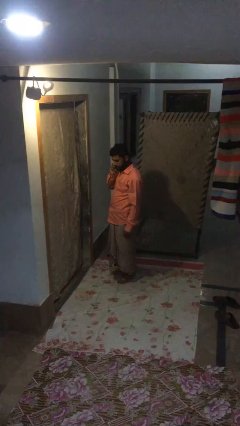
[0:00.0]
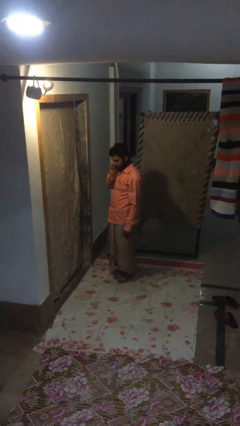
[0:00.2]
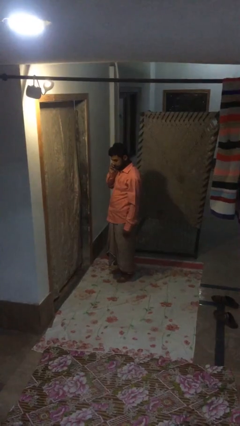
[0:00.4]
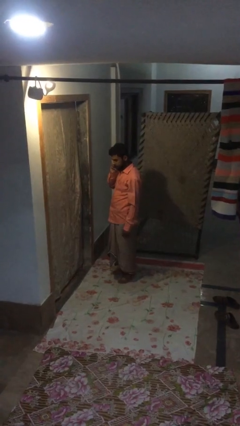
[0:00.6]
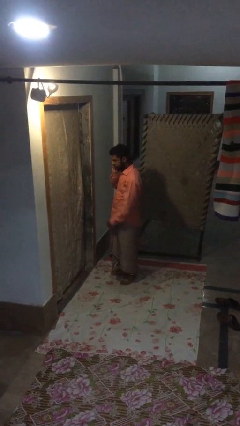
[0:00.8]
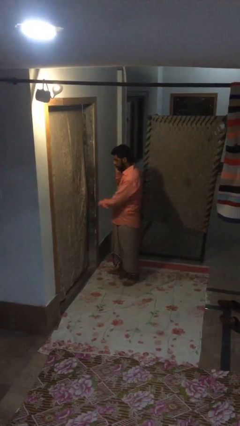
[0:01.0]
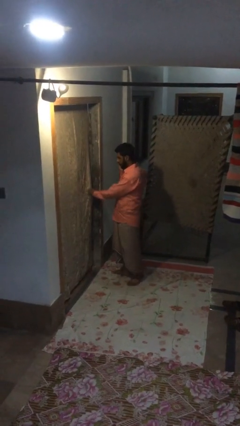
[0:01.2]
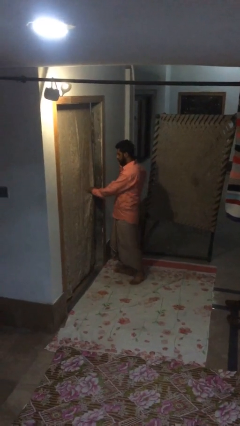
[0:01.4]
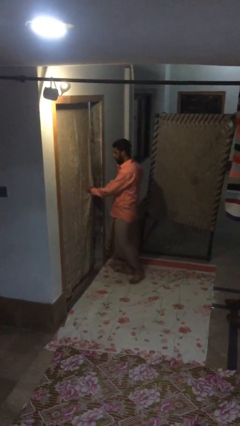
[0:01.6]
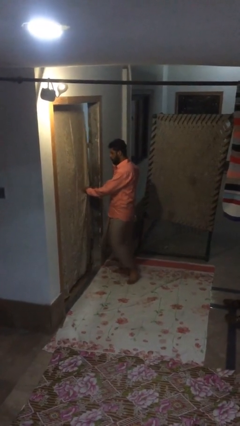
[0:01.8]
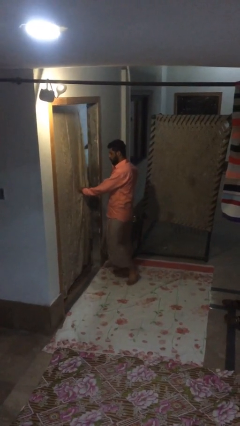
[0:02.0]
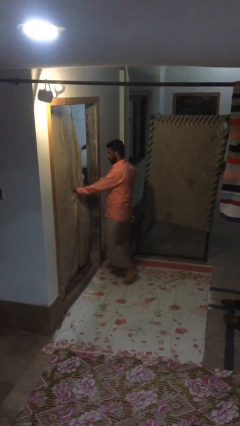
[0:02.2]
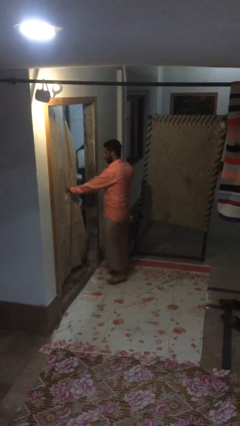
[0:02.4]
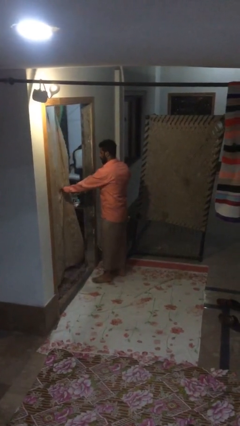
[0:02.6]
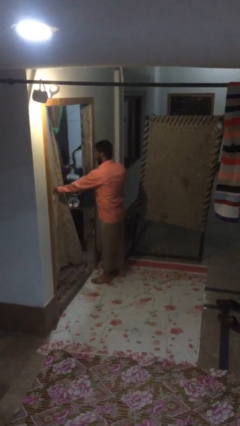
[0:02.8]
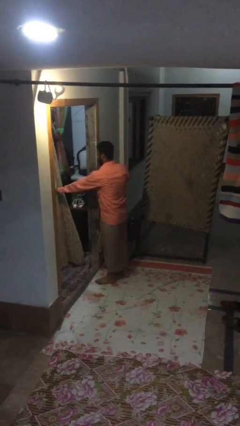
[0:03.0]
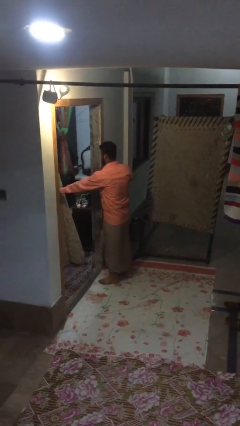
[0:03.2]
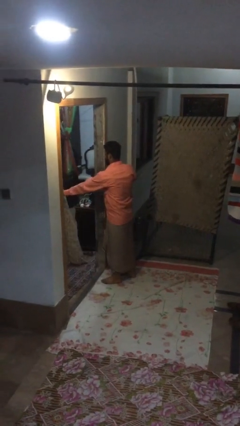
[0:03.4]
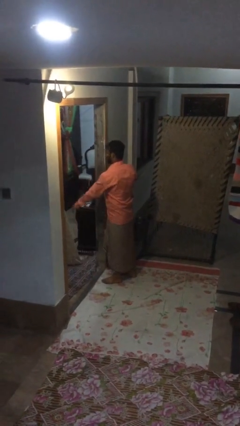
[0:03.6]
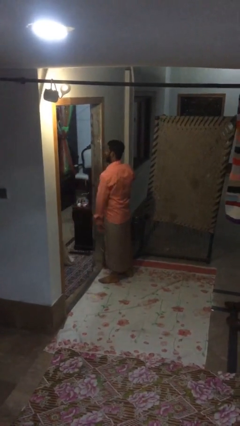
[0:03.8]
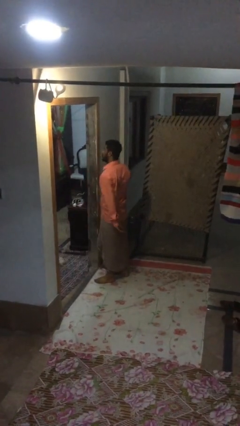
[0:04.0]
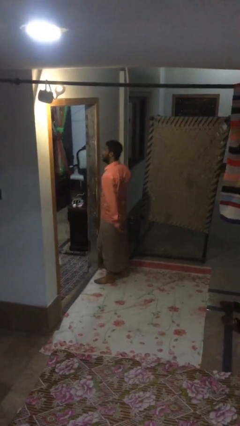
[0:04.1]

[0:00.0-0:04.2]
person opens facility door

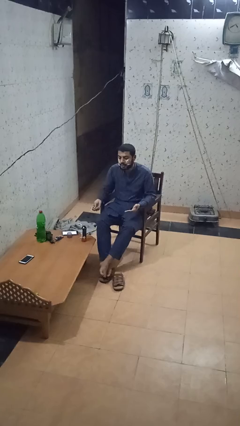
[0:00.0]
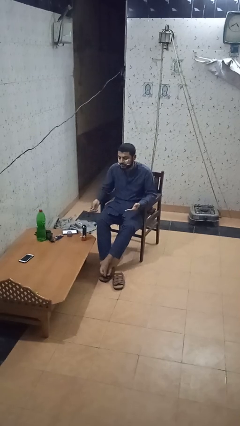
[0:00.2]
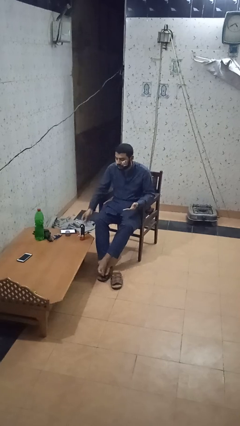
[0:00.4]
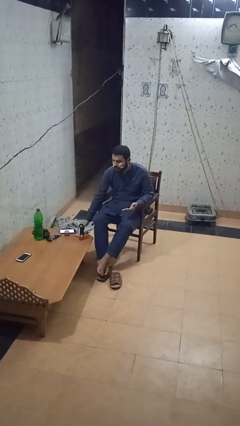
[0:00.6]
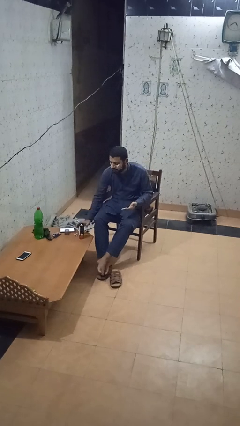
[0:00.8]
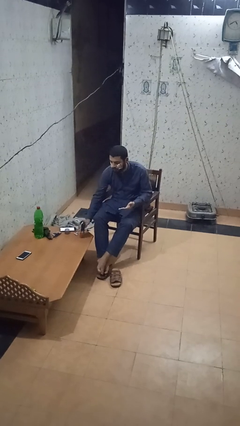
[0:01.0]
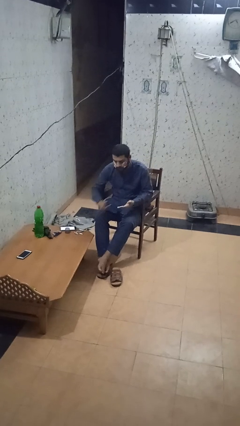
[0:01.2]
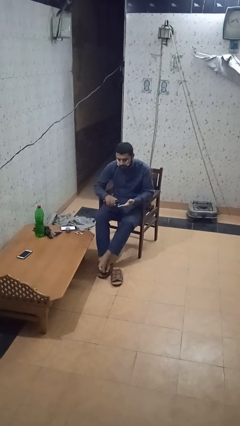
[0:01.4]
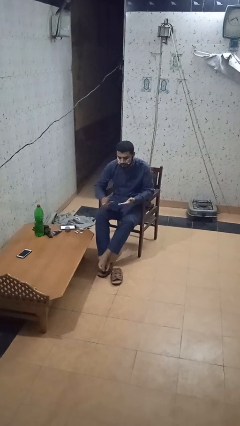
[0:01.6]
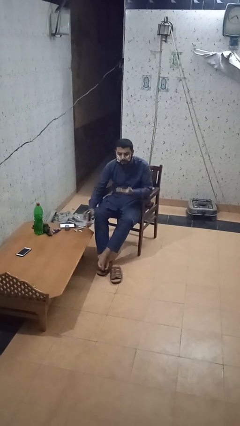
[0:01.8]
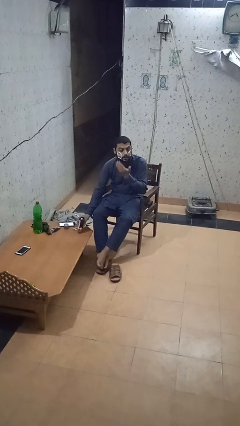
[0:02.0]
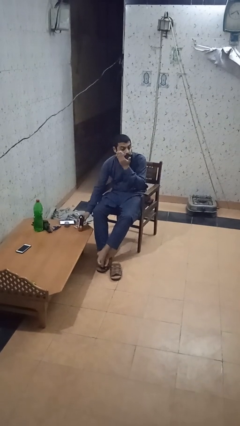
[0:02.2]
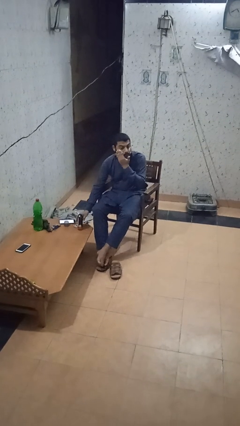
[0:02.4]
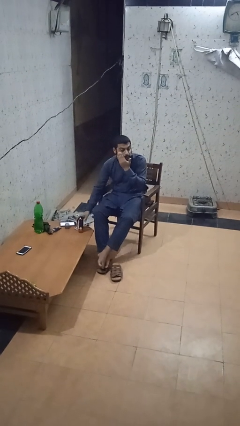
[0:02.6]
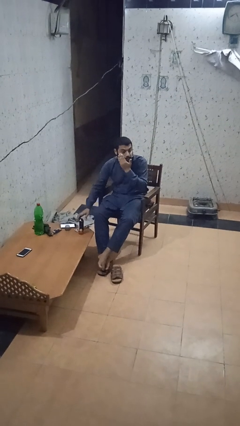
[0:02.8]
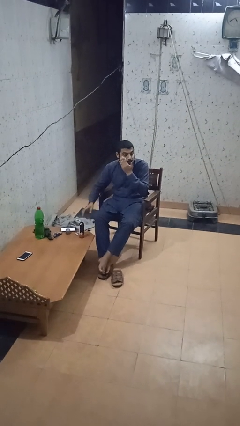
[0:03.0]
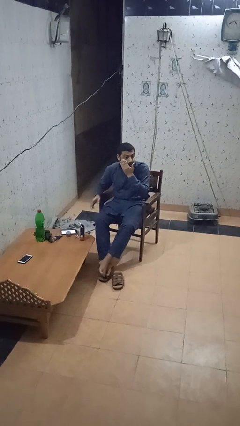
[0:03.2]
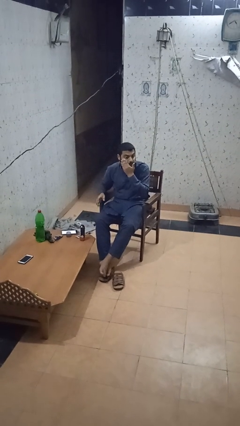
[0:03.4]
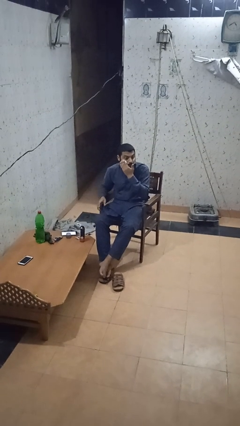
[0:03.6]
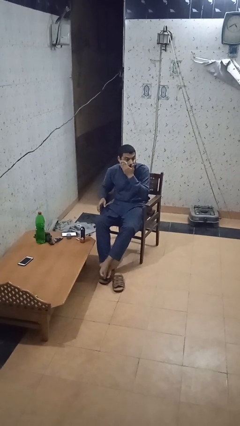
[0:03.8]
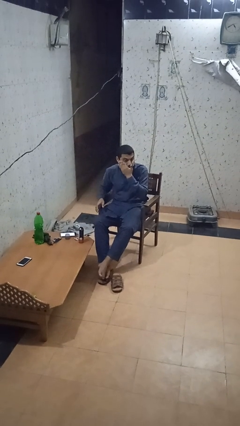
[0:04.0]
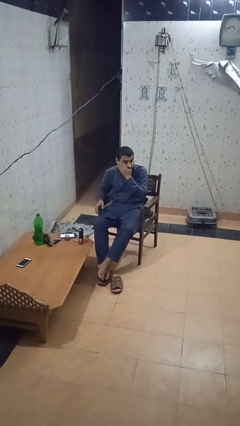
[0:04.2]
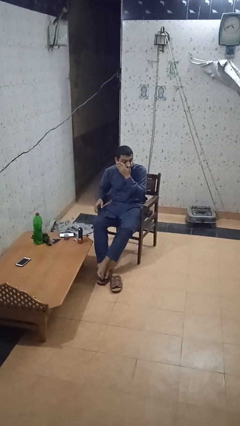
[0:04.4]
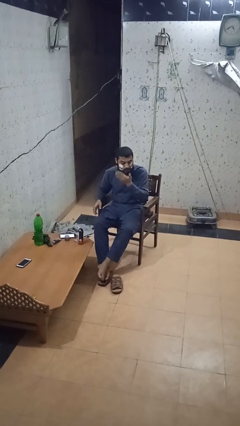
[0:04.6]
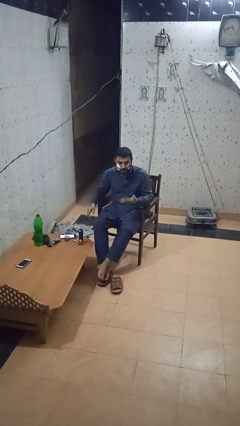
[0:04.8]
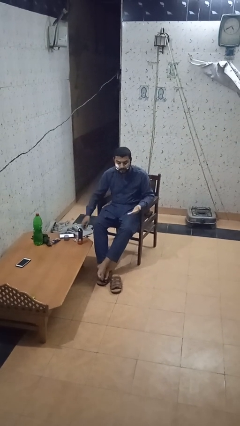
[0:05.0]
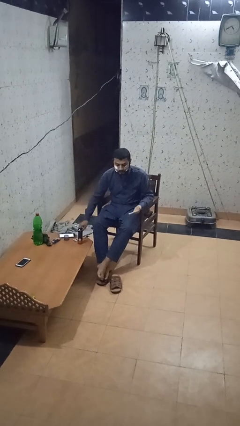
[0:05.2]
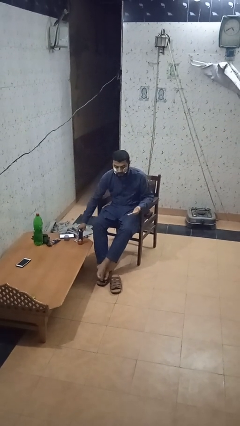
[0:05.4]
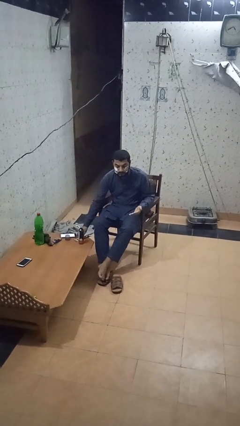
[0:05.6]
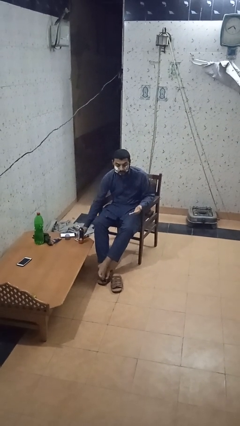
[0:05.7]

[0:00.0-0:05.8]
person applies shaving cream

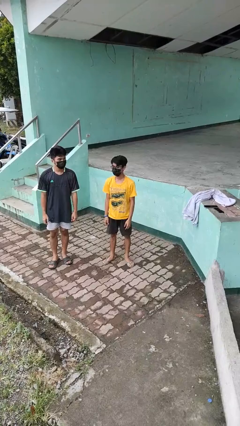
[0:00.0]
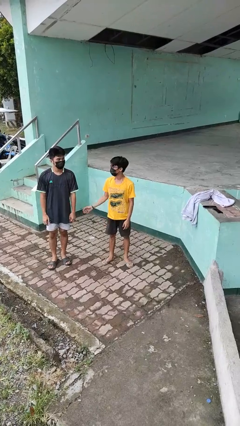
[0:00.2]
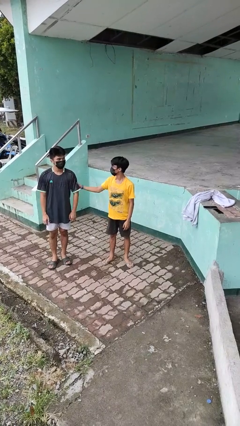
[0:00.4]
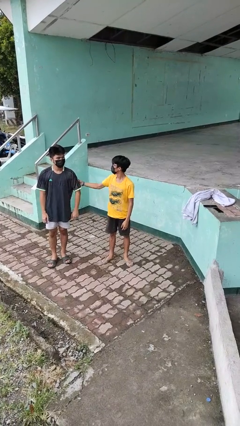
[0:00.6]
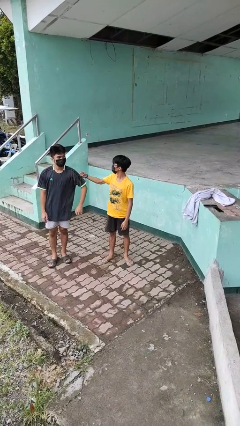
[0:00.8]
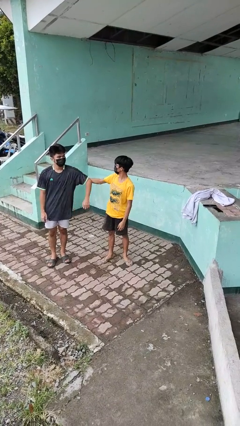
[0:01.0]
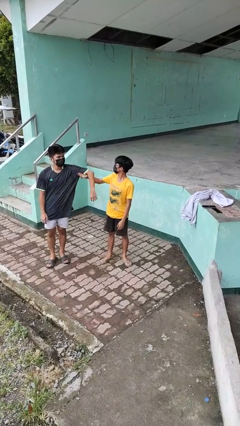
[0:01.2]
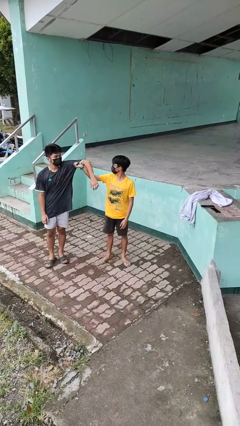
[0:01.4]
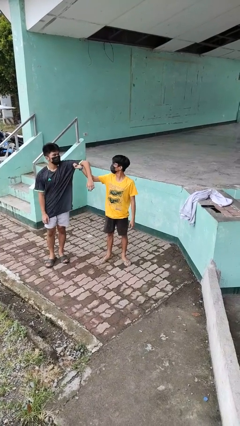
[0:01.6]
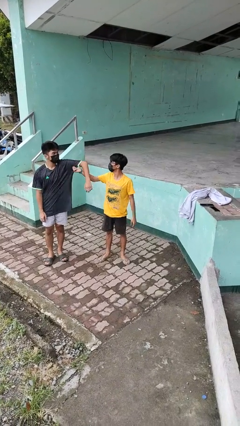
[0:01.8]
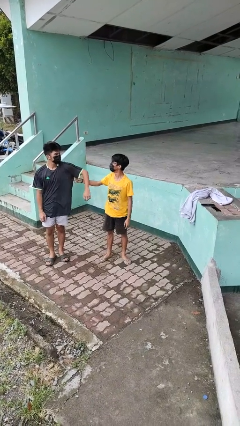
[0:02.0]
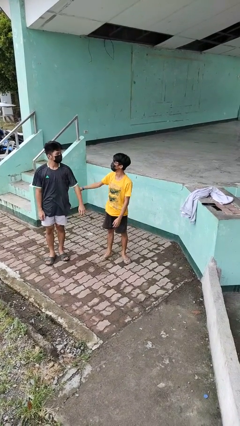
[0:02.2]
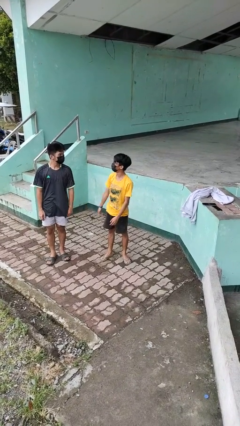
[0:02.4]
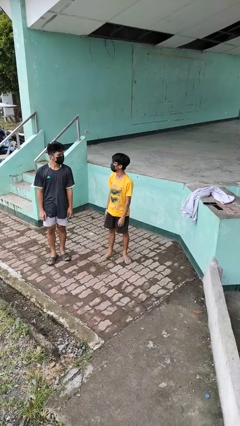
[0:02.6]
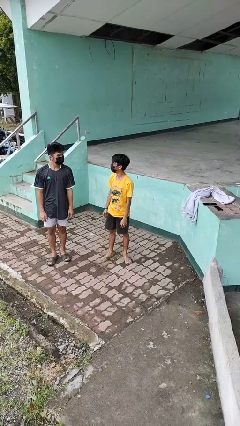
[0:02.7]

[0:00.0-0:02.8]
person grabs person by bicep

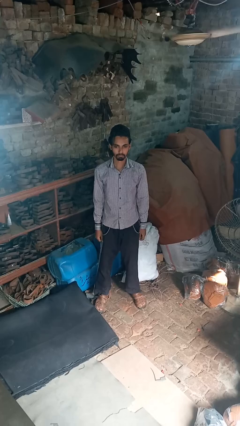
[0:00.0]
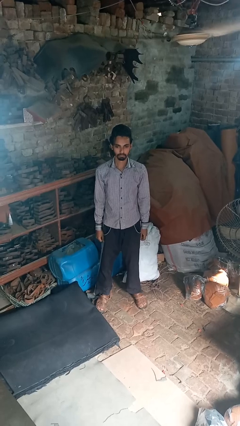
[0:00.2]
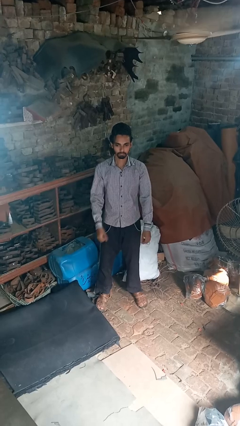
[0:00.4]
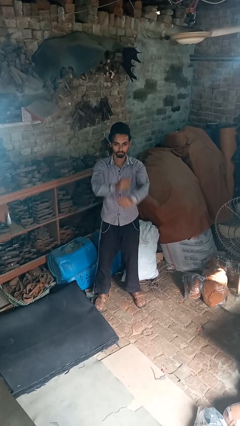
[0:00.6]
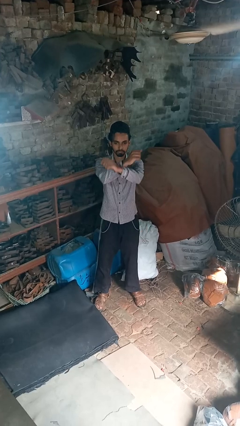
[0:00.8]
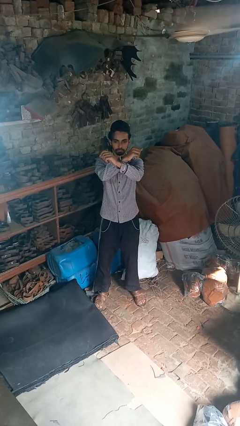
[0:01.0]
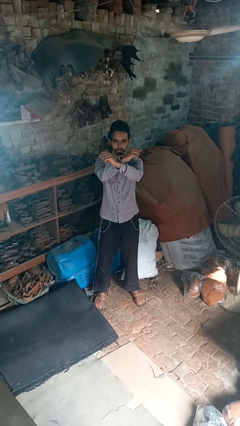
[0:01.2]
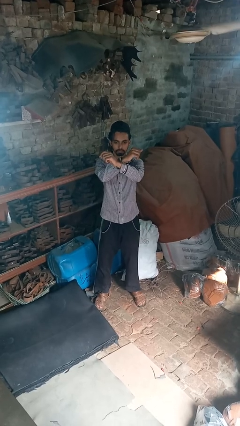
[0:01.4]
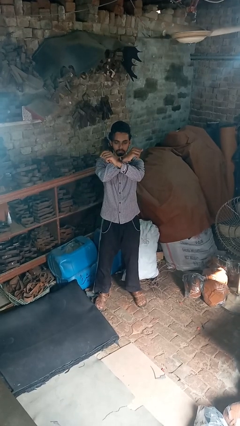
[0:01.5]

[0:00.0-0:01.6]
person crosses arms

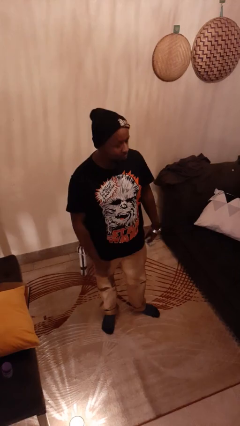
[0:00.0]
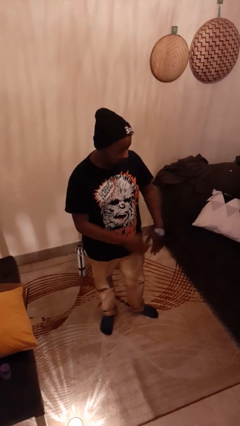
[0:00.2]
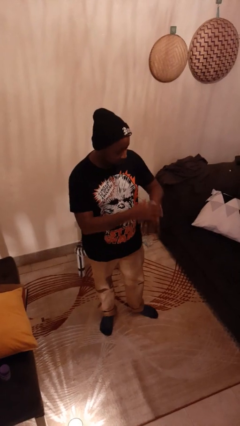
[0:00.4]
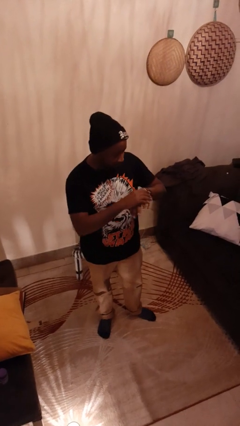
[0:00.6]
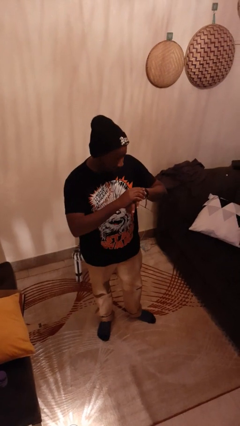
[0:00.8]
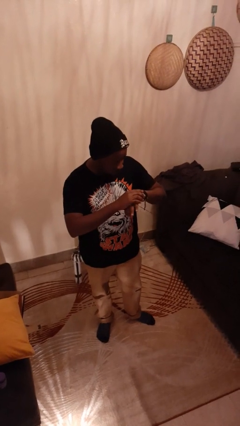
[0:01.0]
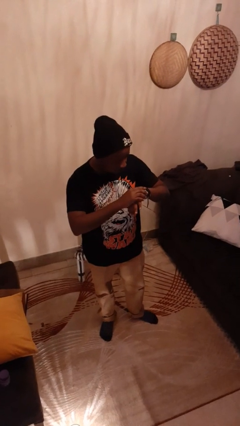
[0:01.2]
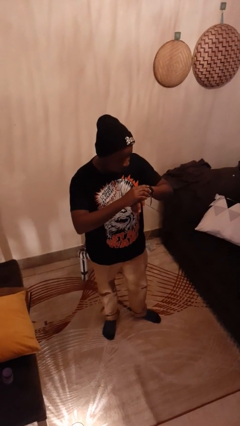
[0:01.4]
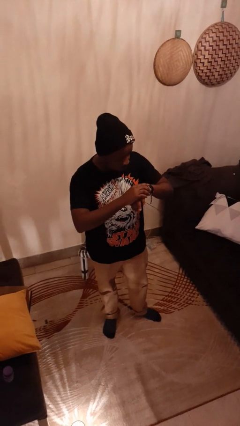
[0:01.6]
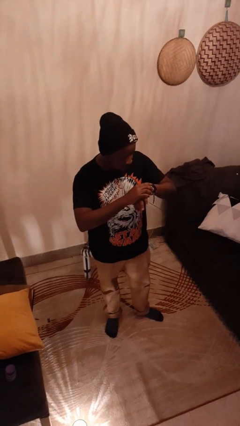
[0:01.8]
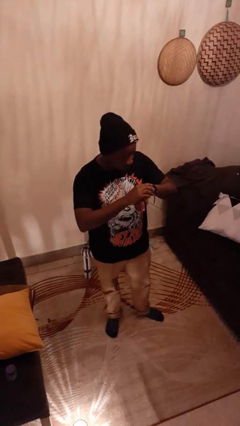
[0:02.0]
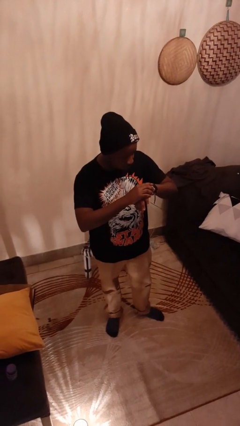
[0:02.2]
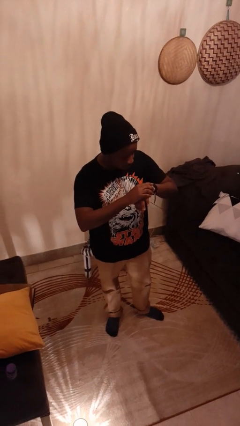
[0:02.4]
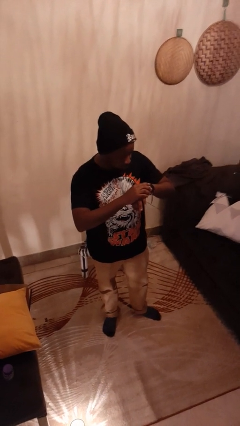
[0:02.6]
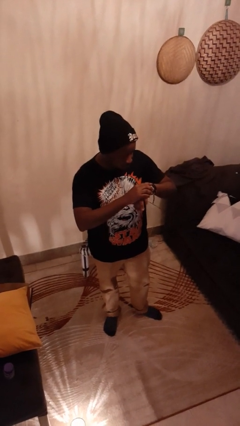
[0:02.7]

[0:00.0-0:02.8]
person looks at wristwatch

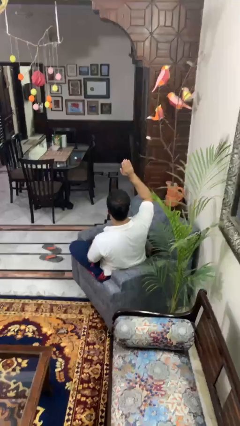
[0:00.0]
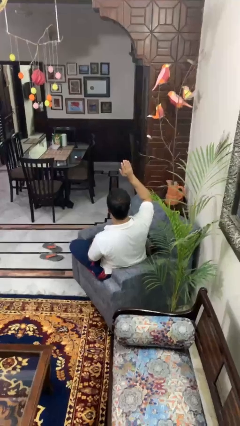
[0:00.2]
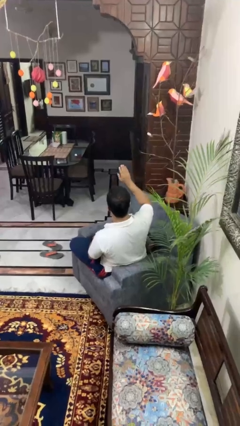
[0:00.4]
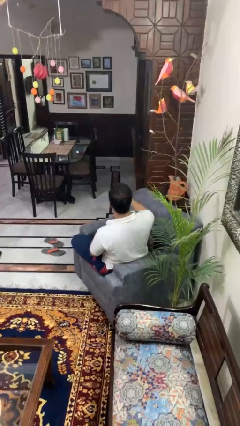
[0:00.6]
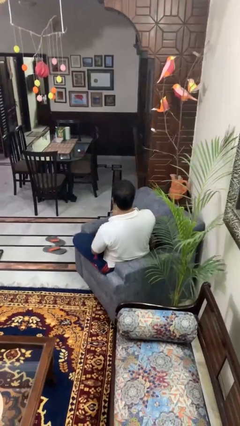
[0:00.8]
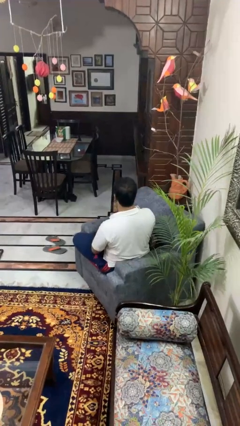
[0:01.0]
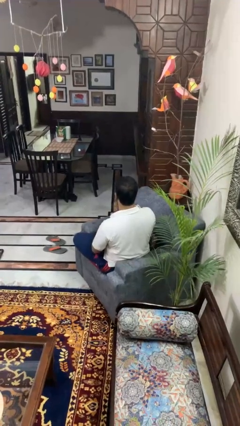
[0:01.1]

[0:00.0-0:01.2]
person gestures lower hand
